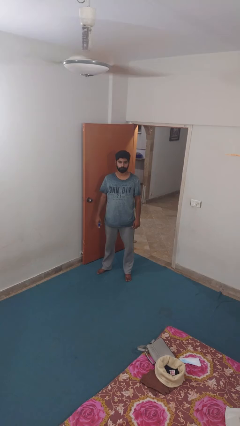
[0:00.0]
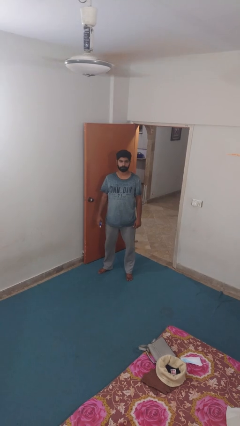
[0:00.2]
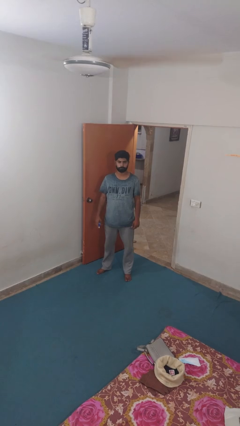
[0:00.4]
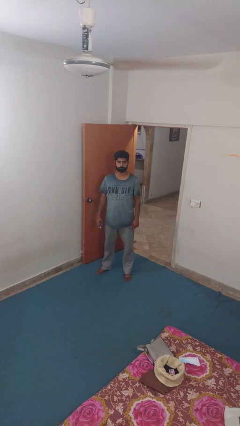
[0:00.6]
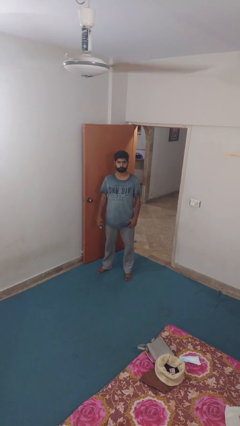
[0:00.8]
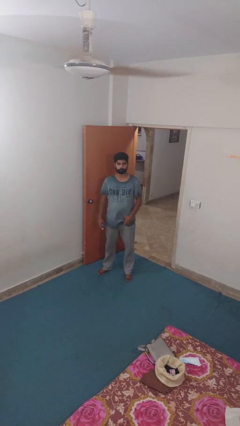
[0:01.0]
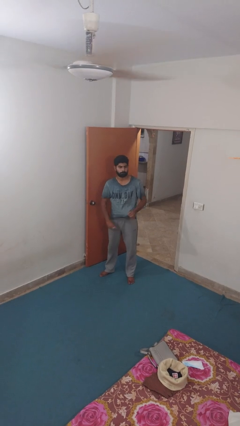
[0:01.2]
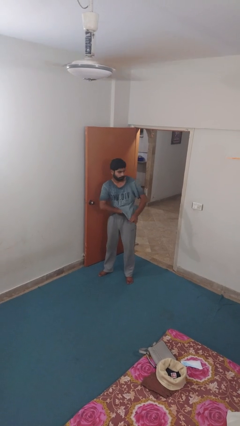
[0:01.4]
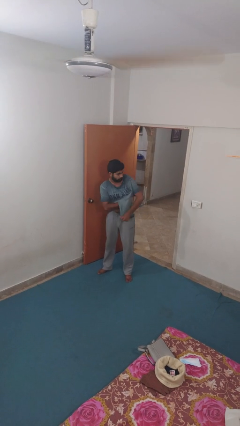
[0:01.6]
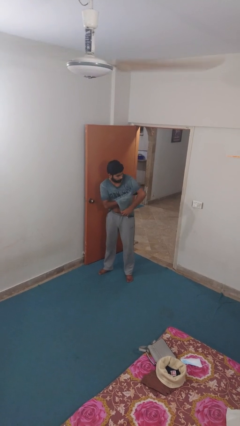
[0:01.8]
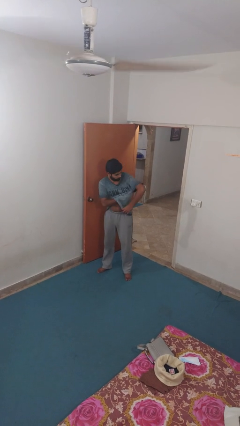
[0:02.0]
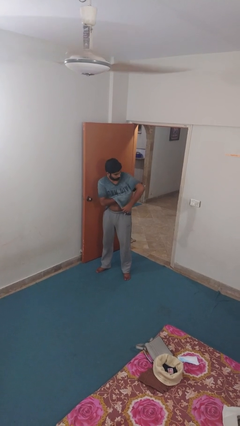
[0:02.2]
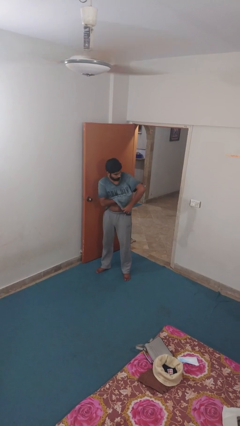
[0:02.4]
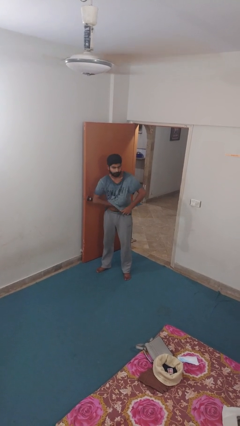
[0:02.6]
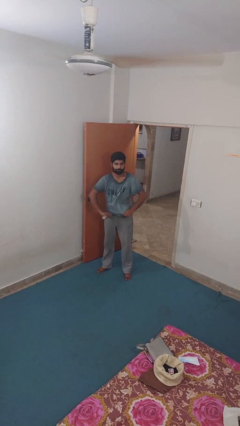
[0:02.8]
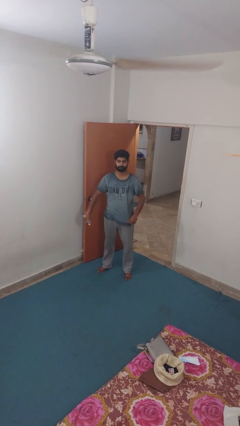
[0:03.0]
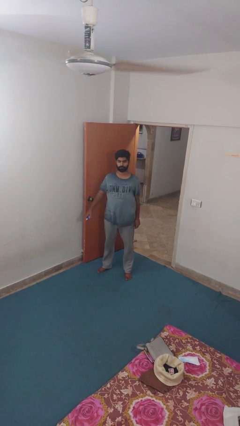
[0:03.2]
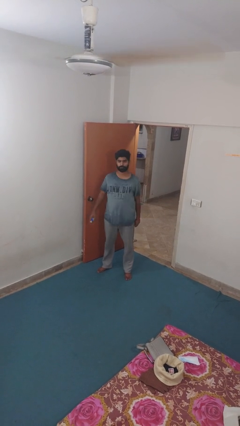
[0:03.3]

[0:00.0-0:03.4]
person applies deodorant

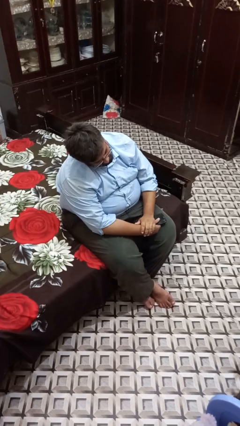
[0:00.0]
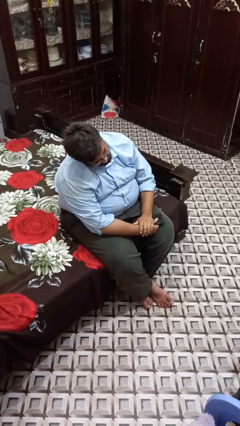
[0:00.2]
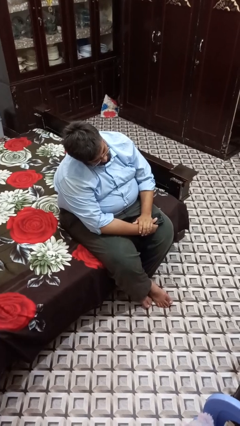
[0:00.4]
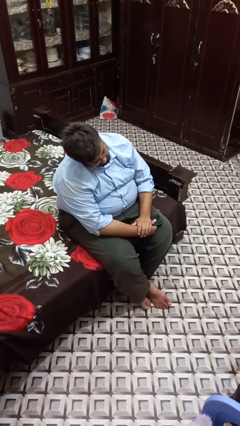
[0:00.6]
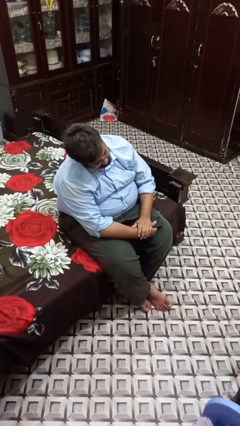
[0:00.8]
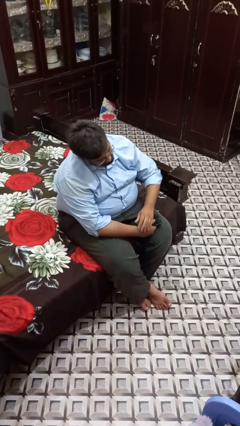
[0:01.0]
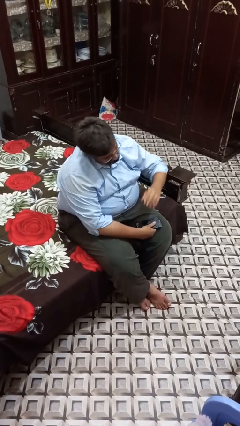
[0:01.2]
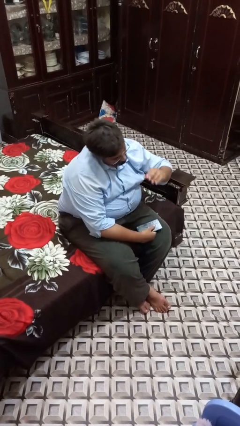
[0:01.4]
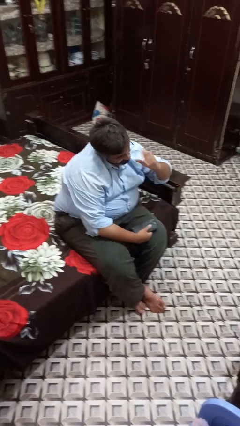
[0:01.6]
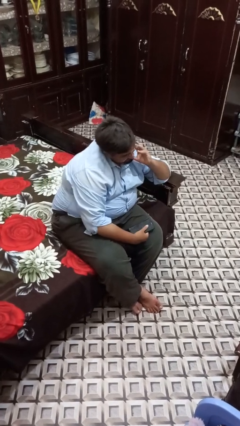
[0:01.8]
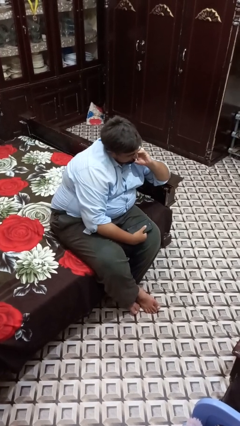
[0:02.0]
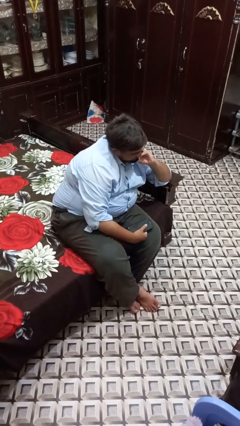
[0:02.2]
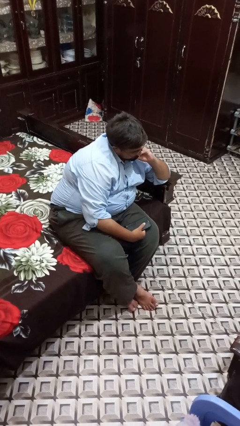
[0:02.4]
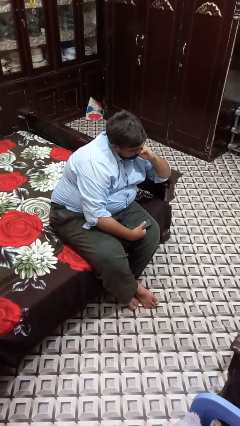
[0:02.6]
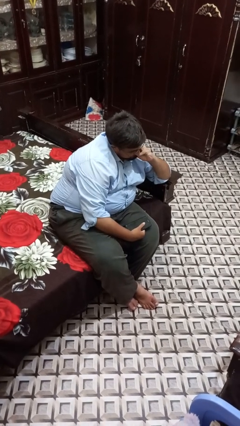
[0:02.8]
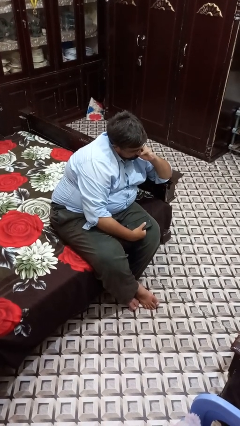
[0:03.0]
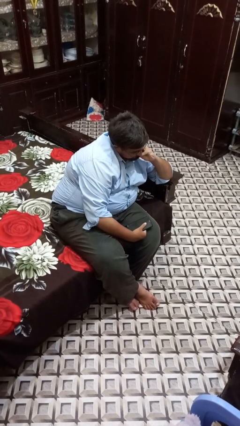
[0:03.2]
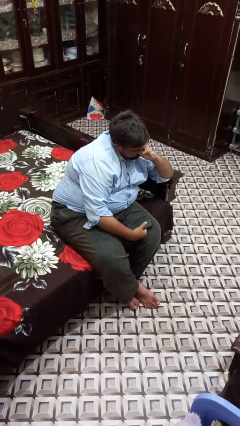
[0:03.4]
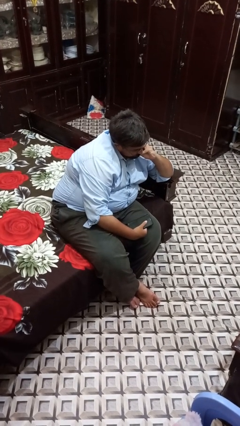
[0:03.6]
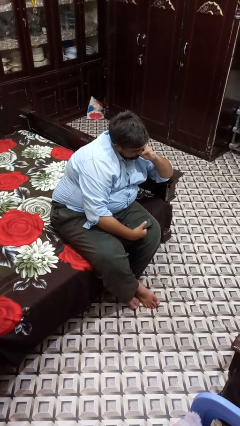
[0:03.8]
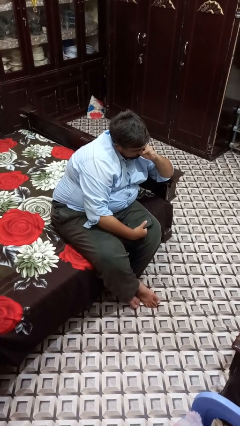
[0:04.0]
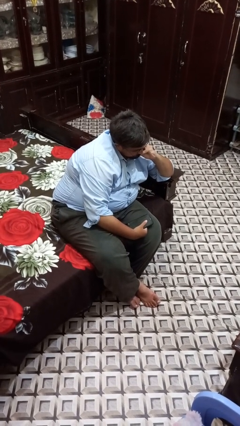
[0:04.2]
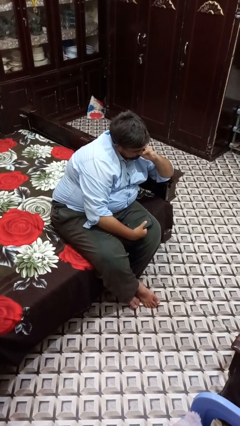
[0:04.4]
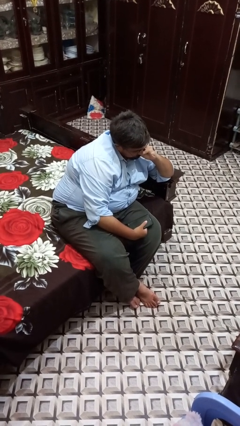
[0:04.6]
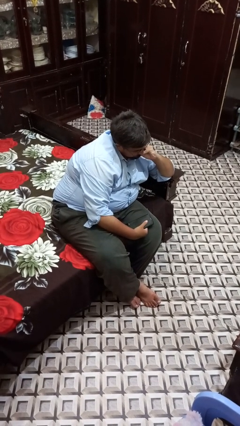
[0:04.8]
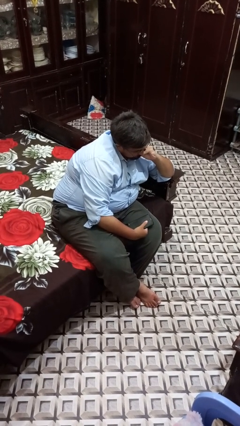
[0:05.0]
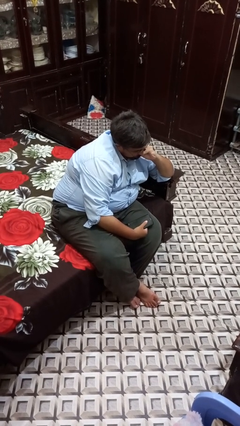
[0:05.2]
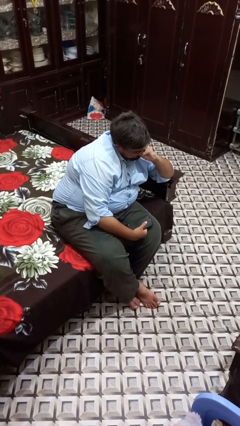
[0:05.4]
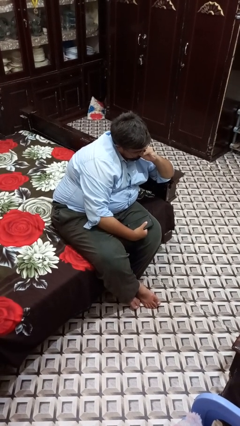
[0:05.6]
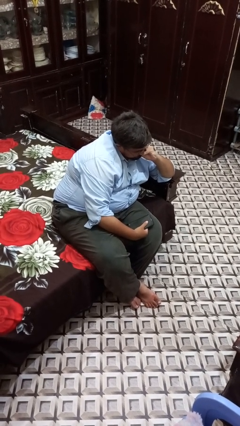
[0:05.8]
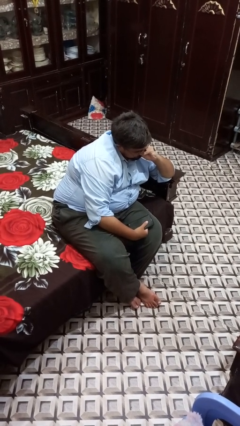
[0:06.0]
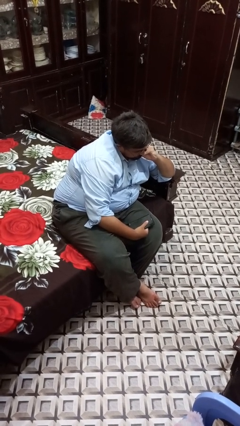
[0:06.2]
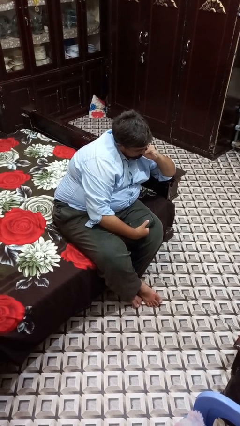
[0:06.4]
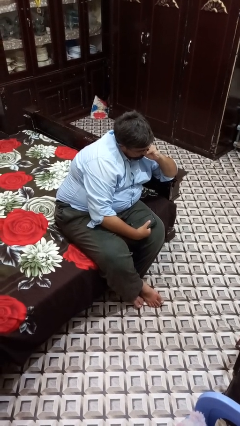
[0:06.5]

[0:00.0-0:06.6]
person strokes chin

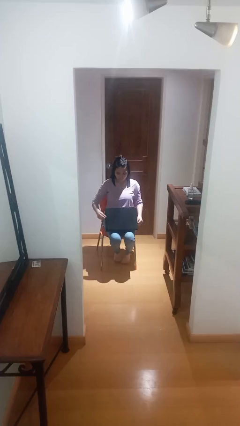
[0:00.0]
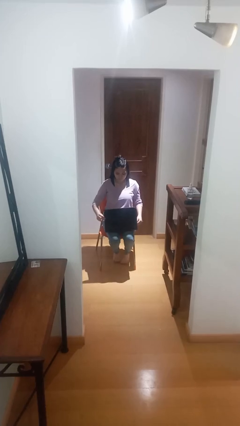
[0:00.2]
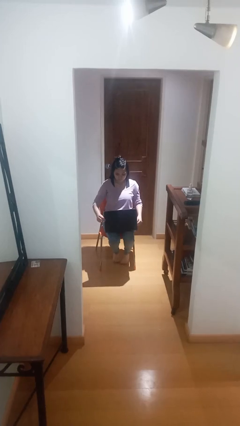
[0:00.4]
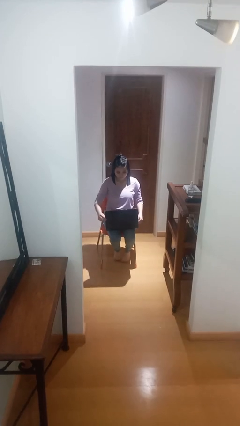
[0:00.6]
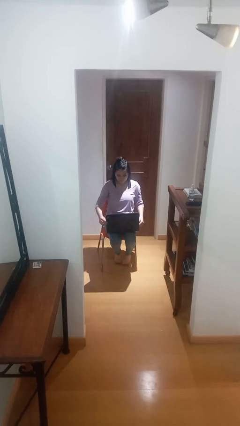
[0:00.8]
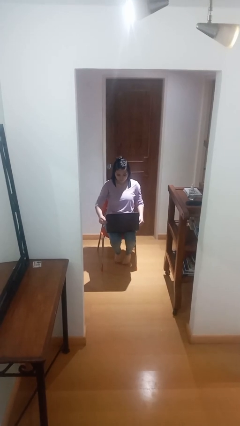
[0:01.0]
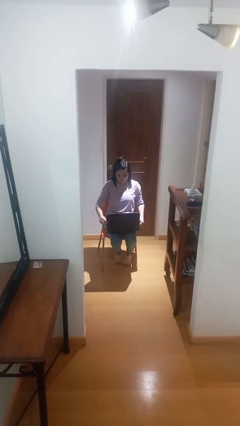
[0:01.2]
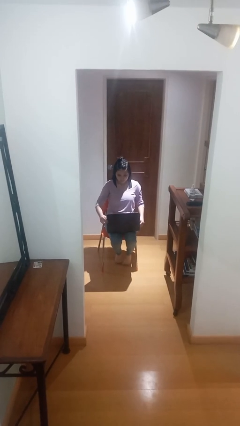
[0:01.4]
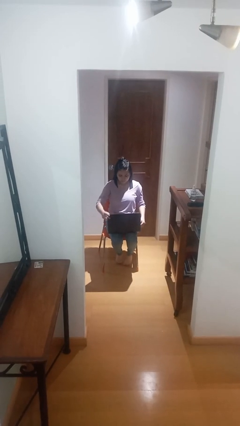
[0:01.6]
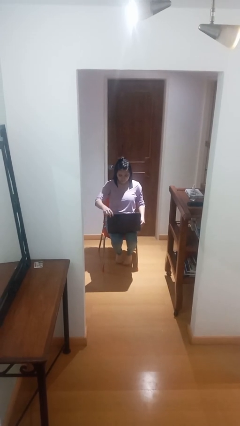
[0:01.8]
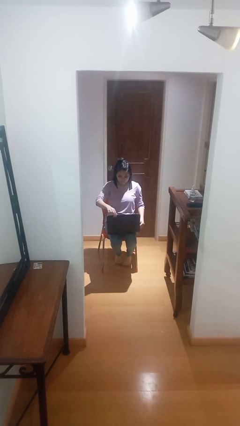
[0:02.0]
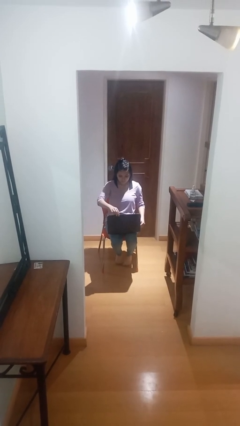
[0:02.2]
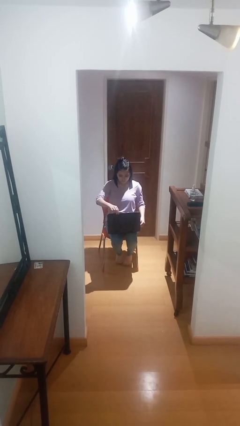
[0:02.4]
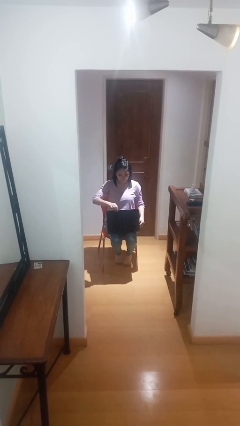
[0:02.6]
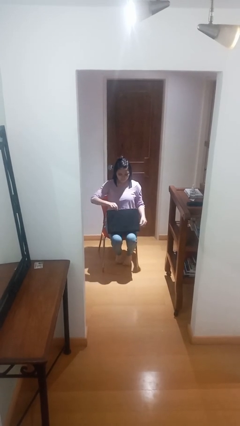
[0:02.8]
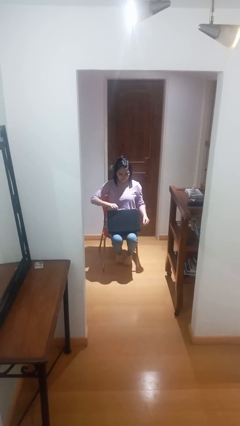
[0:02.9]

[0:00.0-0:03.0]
person interacts with laptop

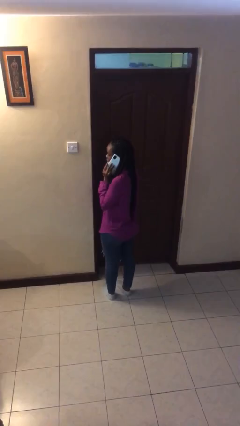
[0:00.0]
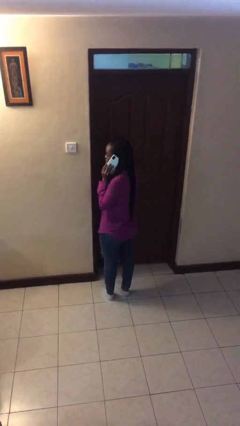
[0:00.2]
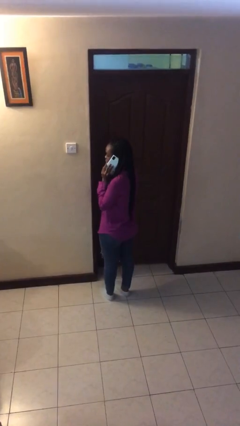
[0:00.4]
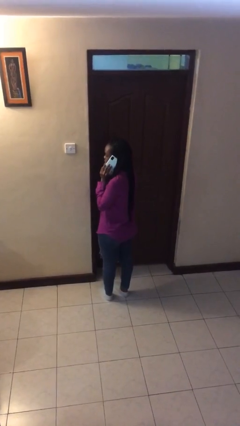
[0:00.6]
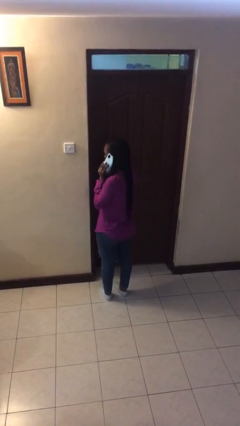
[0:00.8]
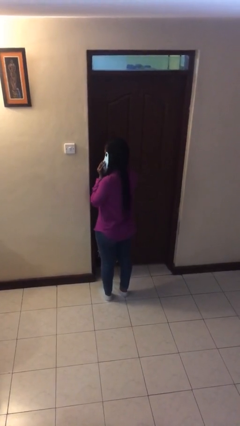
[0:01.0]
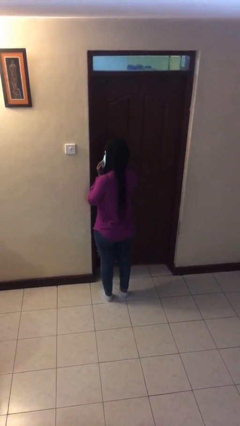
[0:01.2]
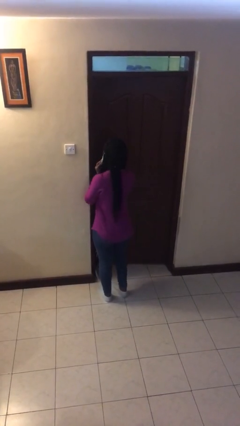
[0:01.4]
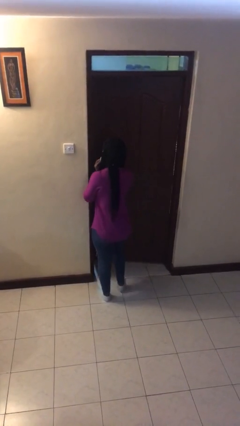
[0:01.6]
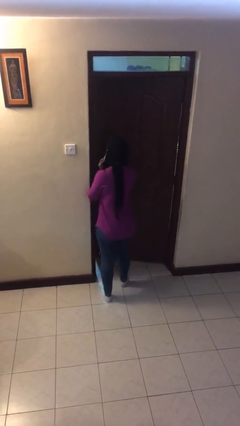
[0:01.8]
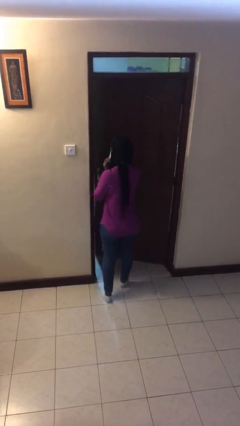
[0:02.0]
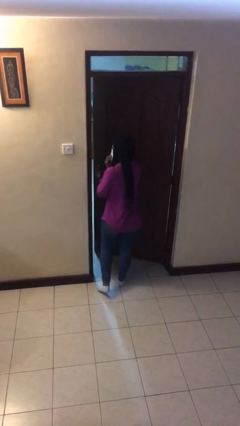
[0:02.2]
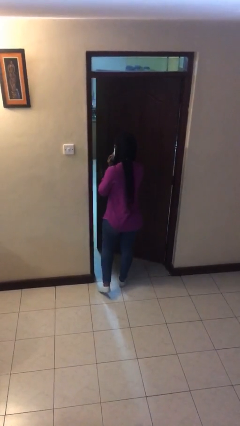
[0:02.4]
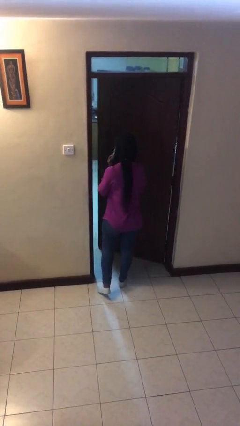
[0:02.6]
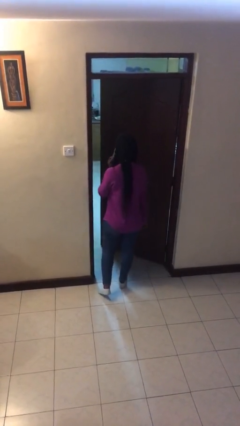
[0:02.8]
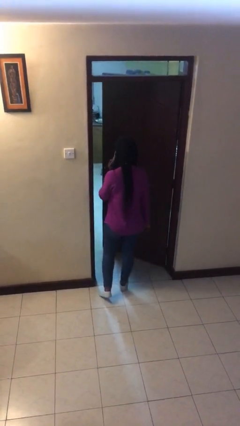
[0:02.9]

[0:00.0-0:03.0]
person opens facility door

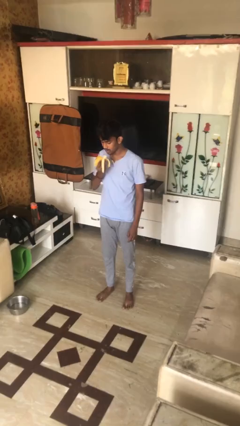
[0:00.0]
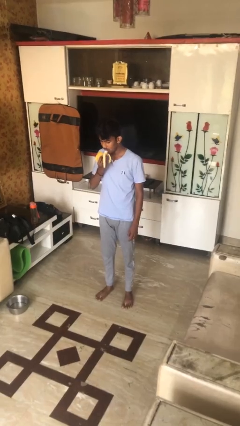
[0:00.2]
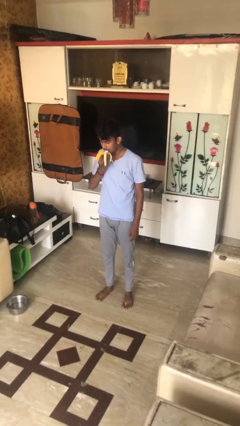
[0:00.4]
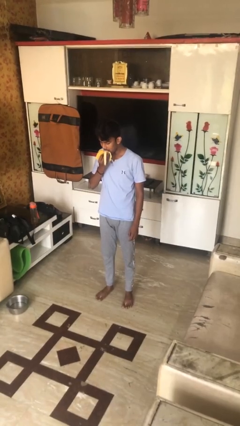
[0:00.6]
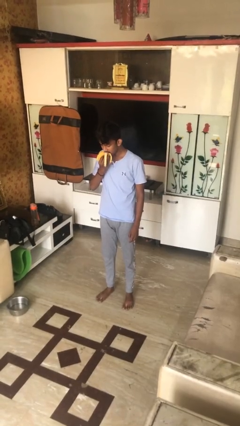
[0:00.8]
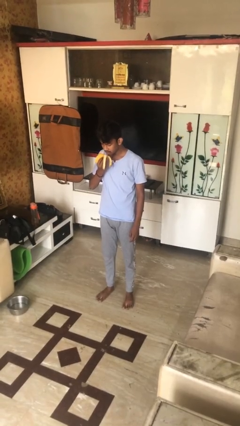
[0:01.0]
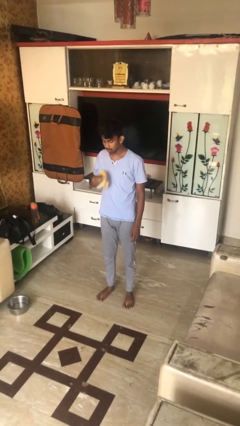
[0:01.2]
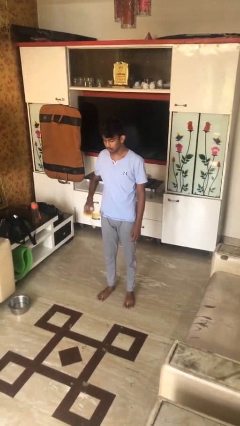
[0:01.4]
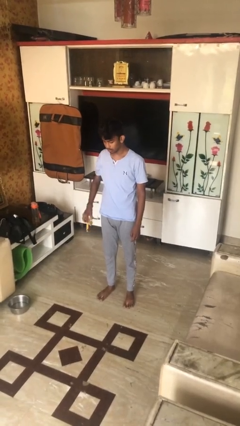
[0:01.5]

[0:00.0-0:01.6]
person eats banana

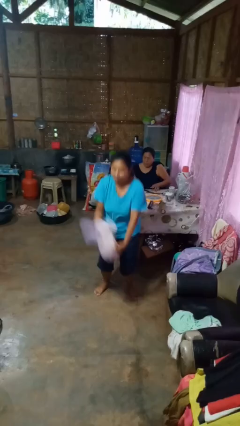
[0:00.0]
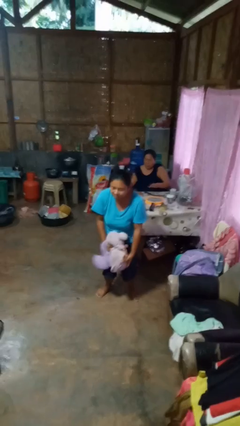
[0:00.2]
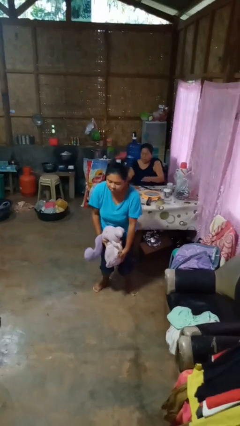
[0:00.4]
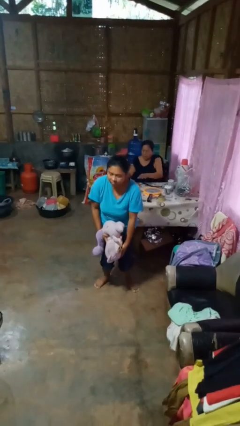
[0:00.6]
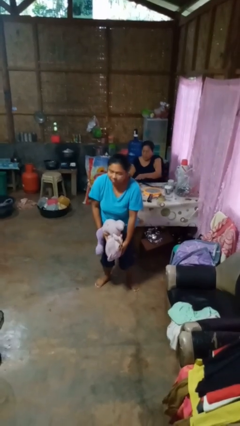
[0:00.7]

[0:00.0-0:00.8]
person catches dropped object
